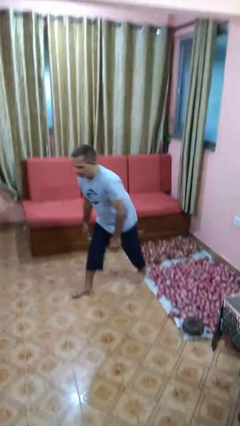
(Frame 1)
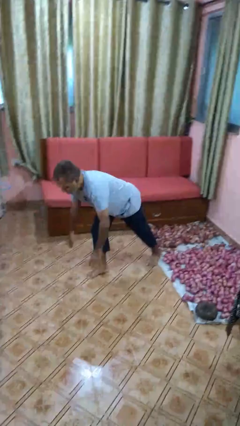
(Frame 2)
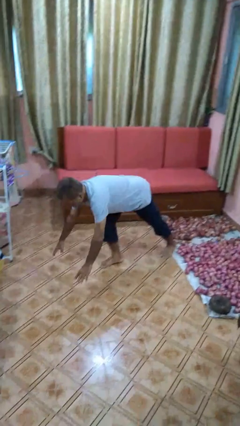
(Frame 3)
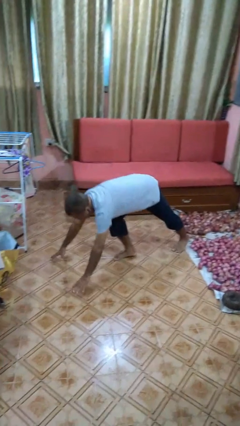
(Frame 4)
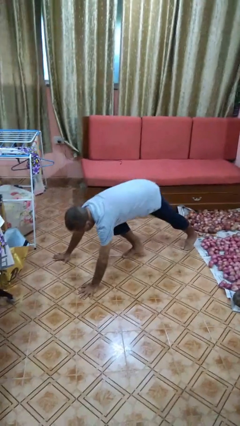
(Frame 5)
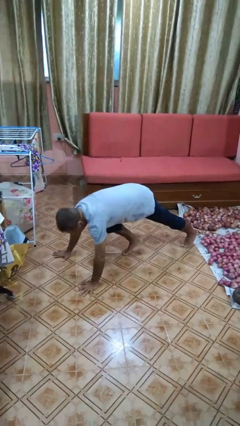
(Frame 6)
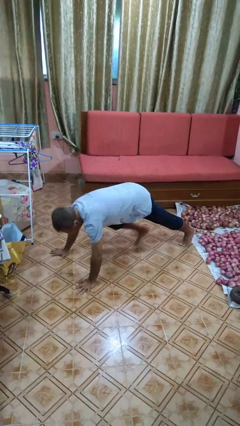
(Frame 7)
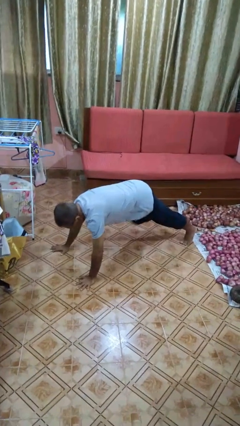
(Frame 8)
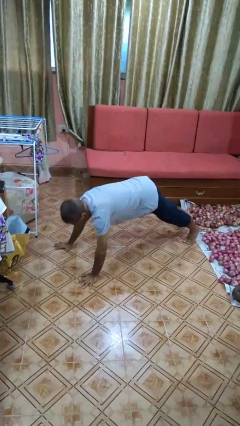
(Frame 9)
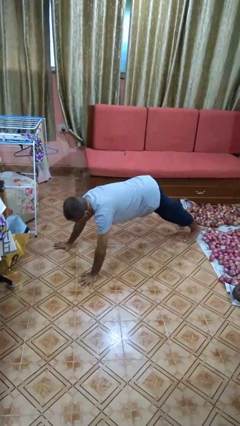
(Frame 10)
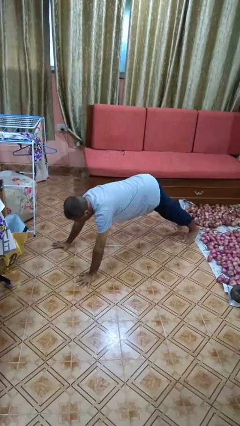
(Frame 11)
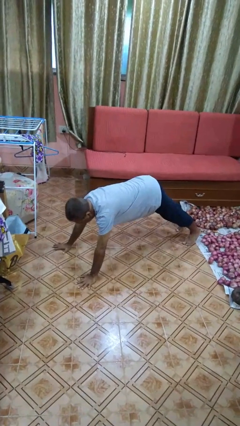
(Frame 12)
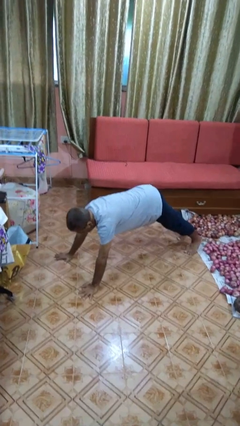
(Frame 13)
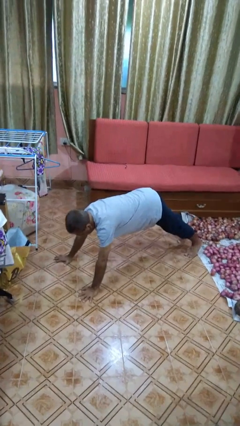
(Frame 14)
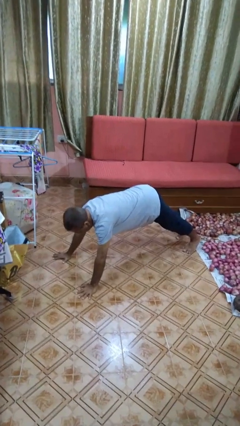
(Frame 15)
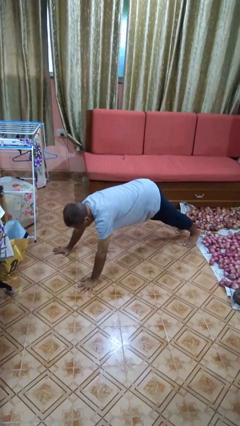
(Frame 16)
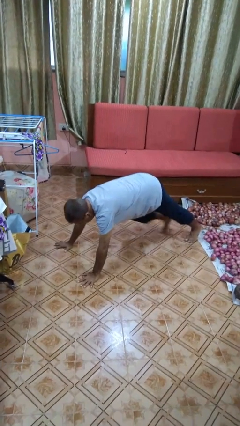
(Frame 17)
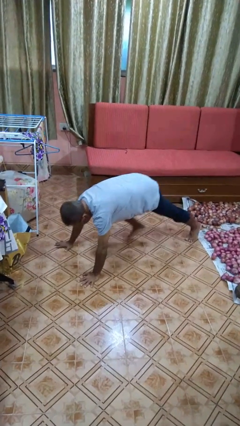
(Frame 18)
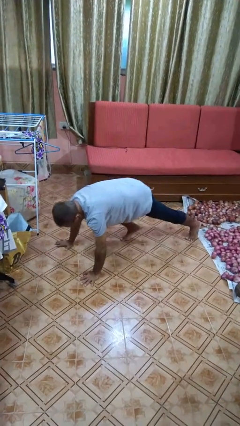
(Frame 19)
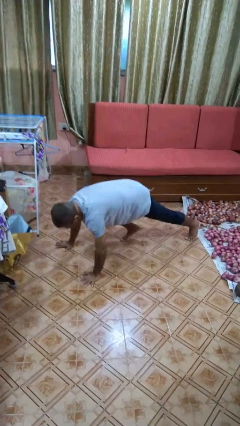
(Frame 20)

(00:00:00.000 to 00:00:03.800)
person exercises with plank

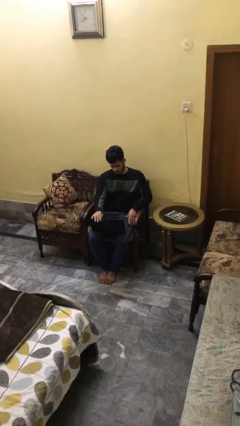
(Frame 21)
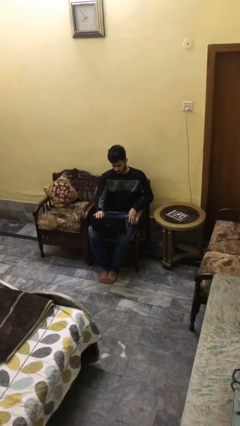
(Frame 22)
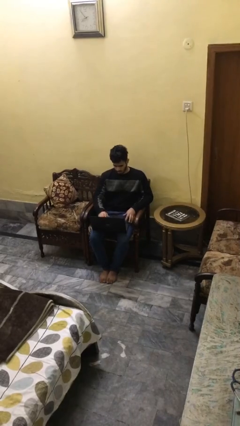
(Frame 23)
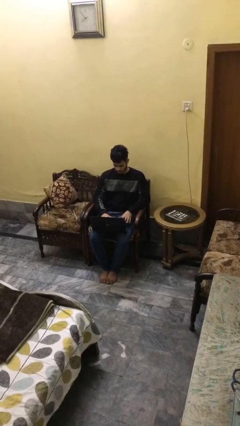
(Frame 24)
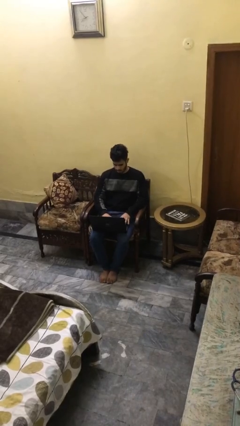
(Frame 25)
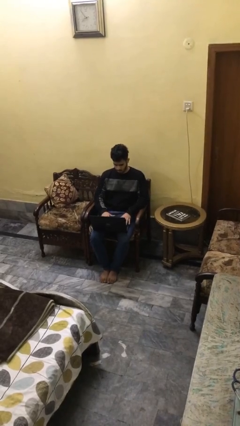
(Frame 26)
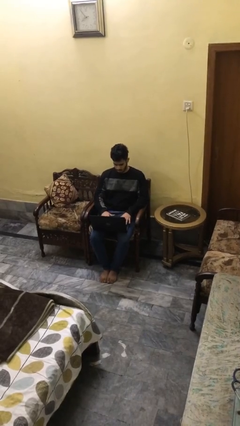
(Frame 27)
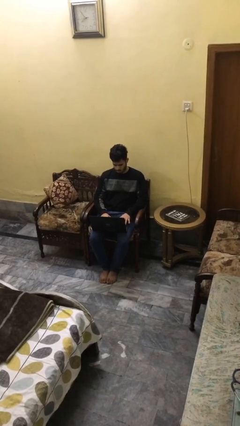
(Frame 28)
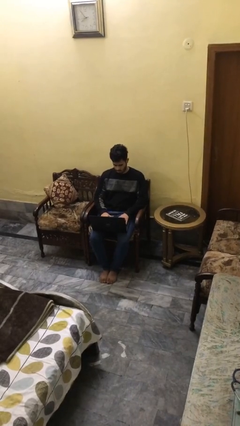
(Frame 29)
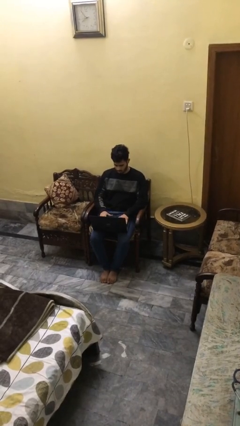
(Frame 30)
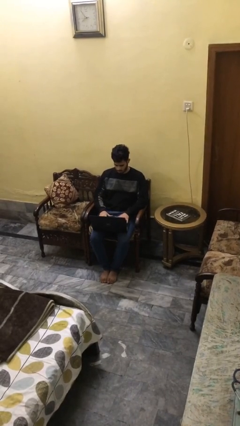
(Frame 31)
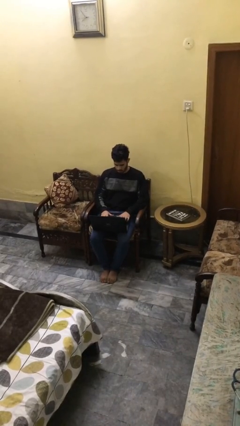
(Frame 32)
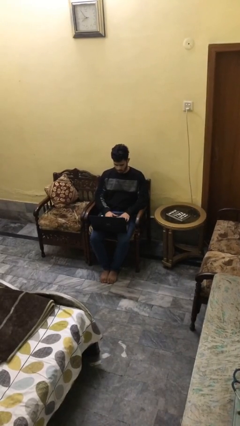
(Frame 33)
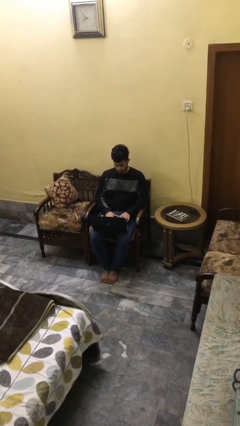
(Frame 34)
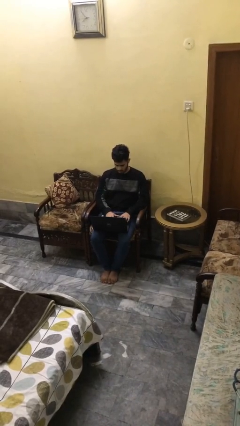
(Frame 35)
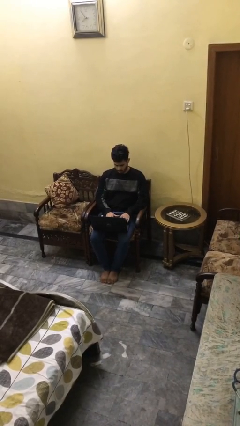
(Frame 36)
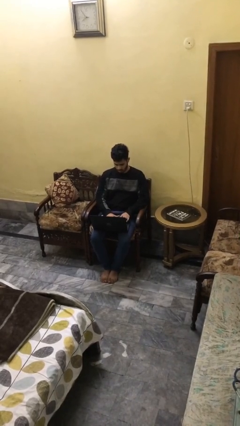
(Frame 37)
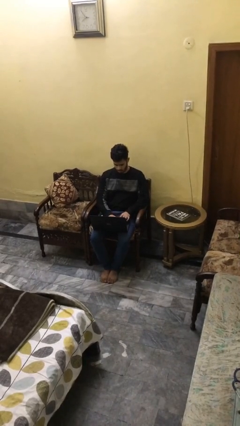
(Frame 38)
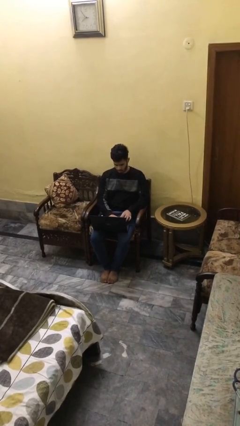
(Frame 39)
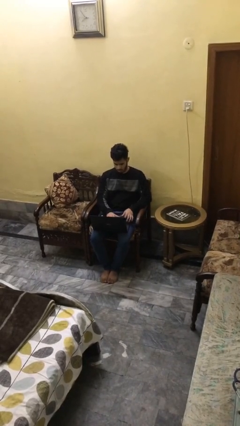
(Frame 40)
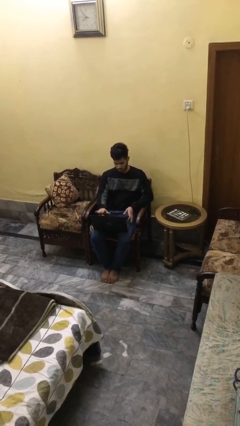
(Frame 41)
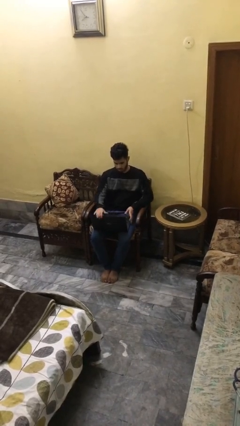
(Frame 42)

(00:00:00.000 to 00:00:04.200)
person interacts with laptop

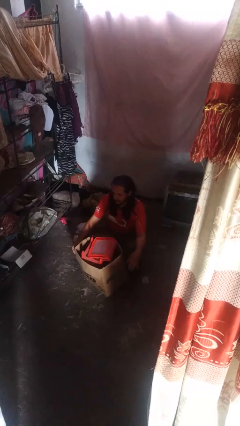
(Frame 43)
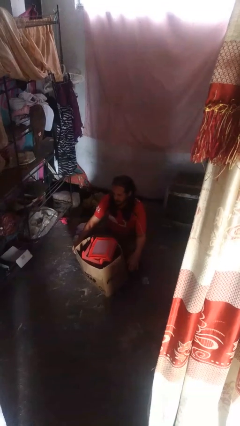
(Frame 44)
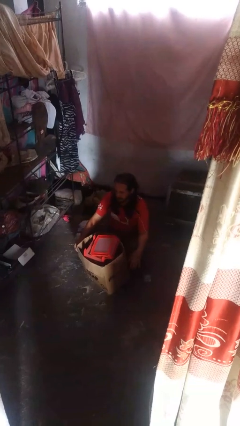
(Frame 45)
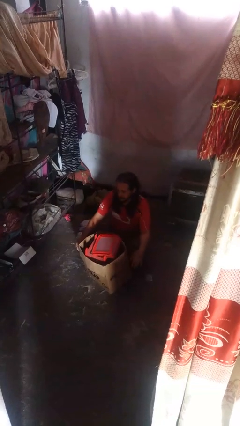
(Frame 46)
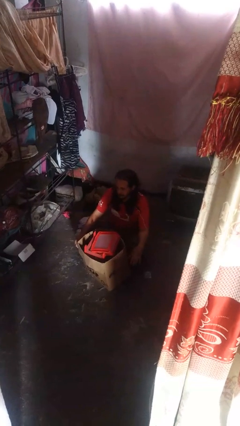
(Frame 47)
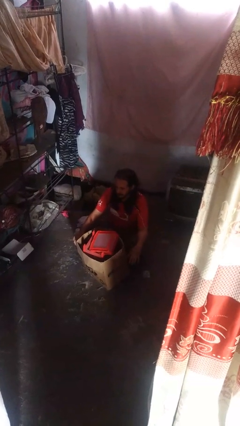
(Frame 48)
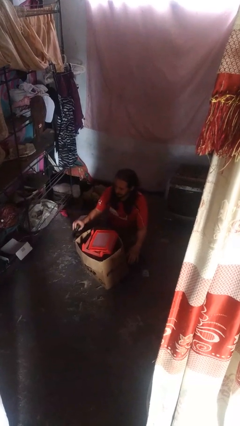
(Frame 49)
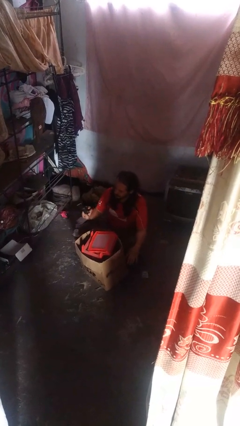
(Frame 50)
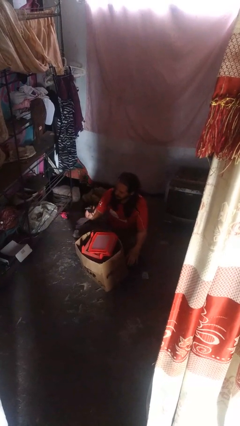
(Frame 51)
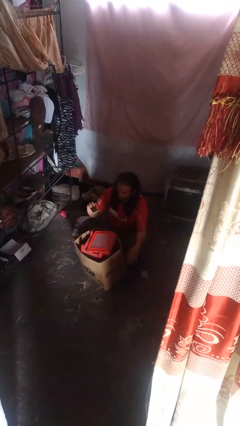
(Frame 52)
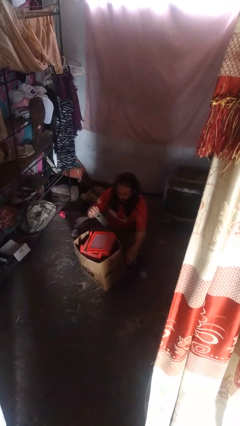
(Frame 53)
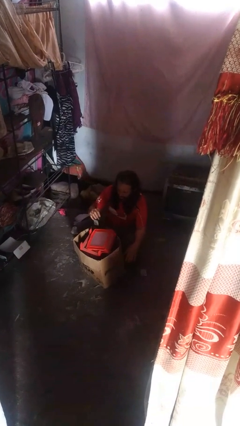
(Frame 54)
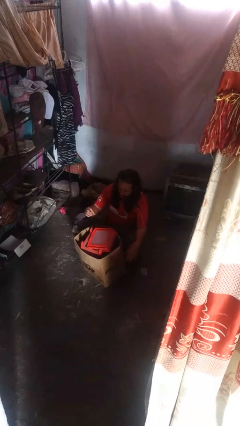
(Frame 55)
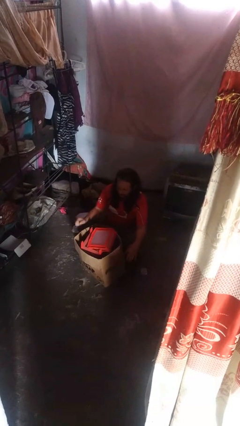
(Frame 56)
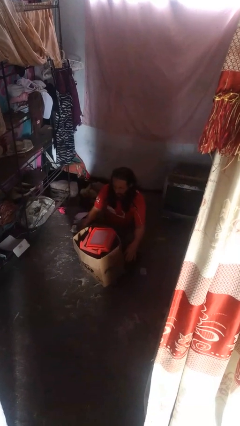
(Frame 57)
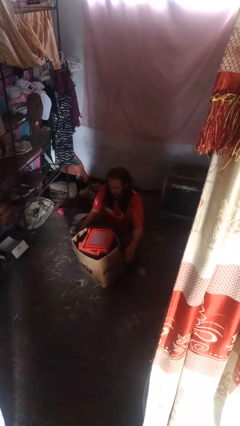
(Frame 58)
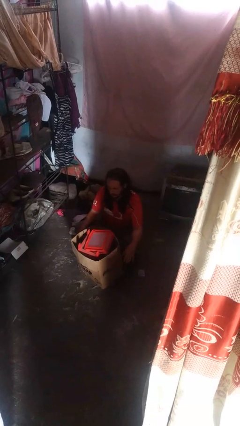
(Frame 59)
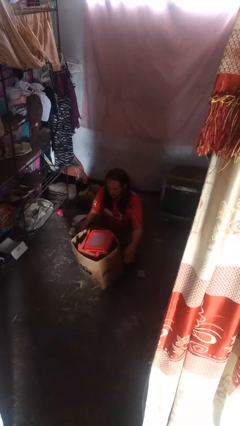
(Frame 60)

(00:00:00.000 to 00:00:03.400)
person puts object into box

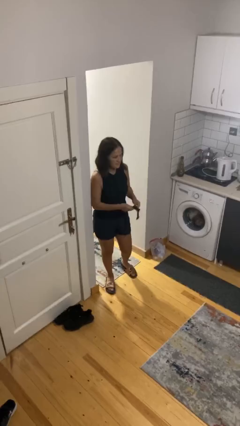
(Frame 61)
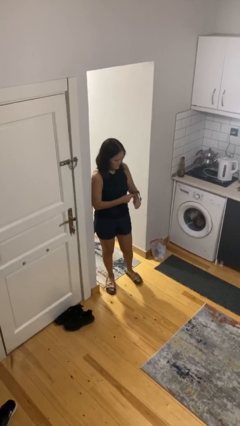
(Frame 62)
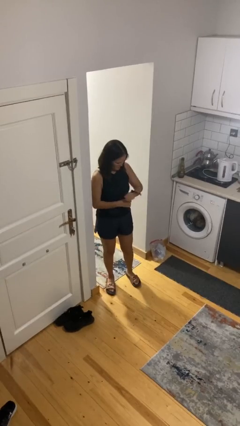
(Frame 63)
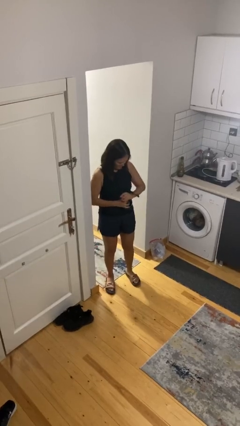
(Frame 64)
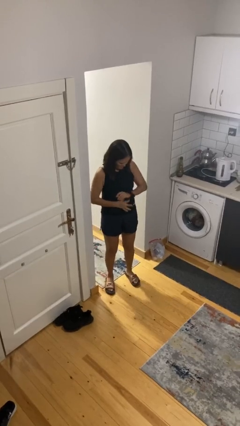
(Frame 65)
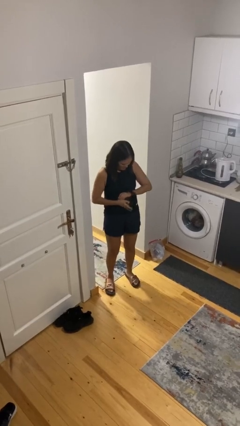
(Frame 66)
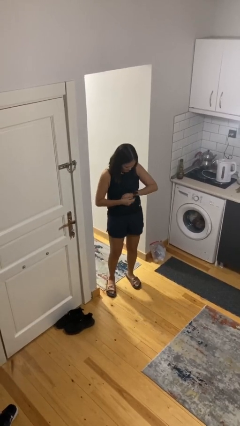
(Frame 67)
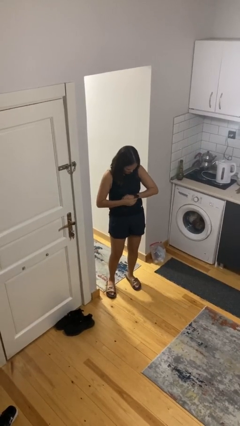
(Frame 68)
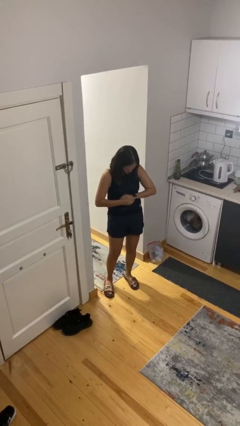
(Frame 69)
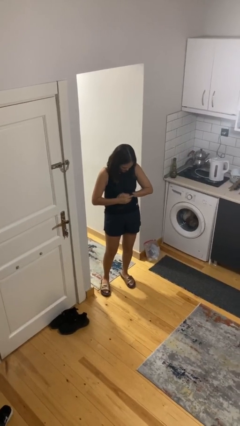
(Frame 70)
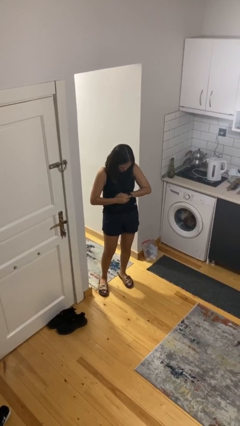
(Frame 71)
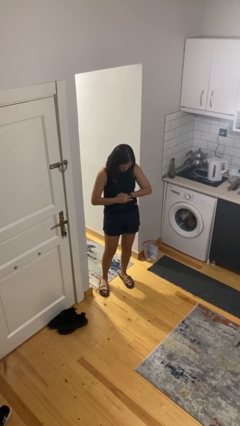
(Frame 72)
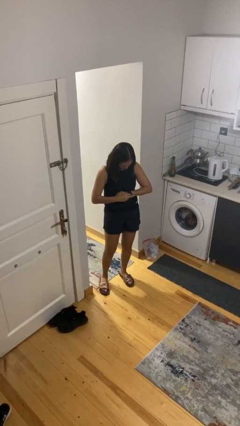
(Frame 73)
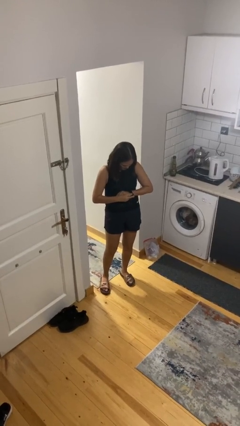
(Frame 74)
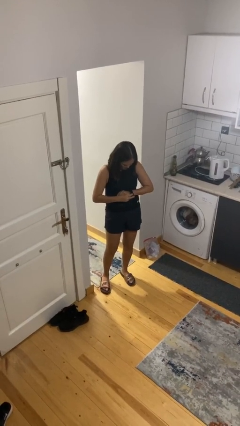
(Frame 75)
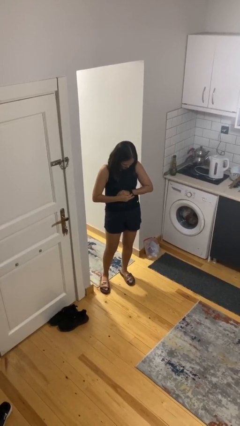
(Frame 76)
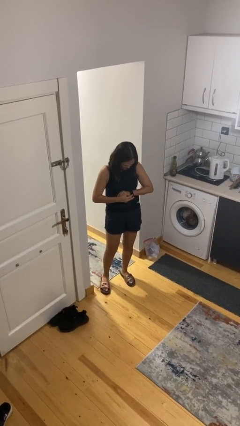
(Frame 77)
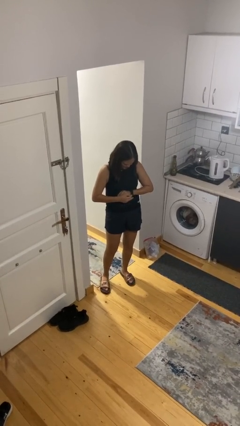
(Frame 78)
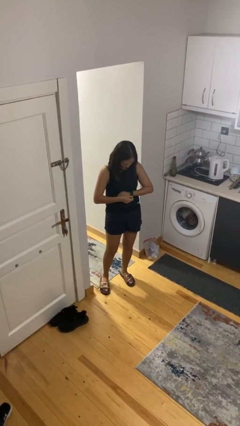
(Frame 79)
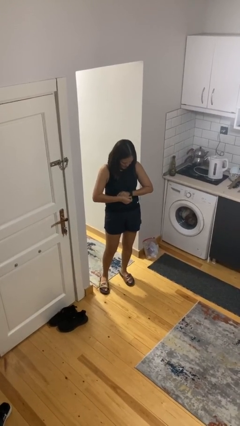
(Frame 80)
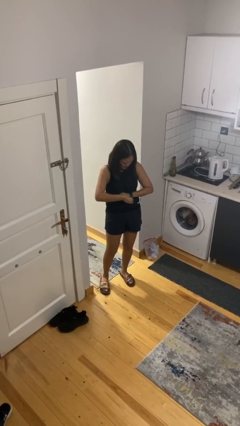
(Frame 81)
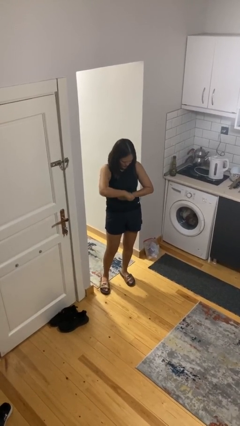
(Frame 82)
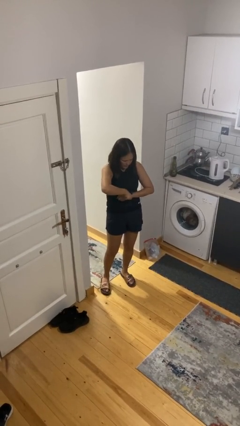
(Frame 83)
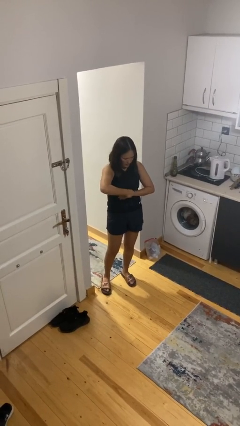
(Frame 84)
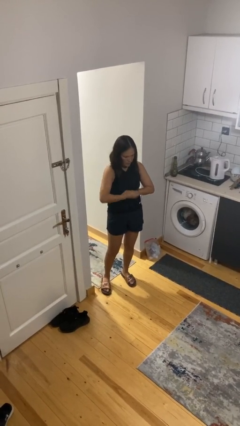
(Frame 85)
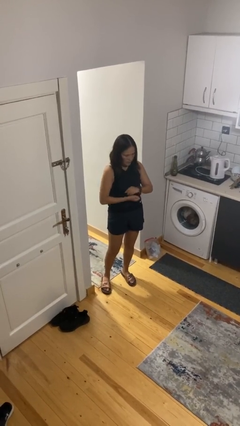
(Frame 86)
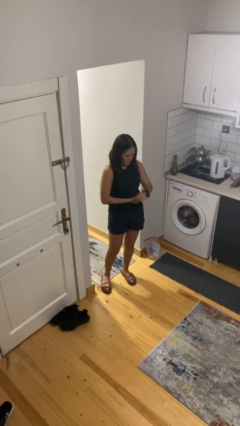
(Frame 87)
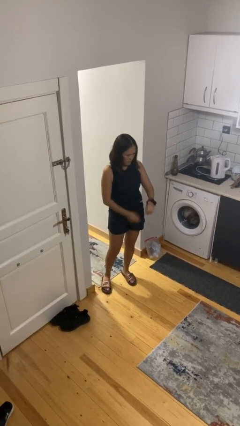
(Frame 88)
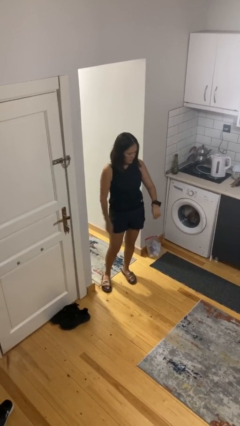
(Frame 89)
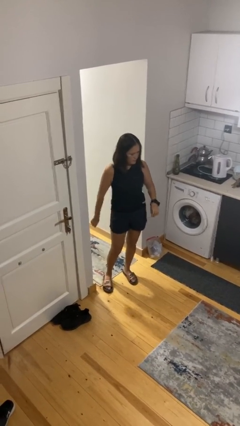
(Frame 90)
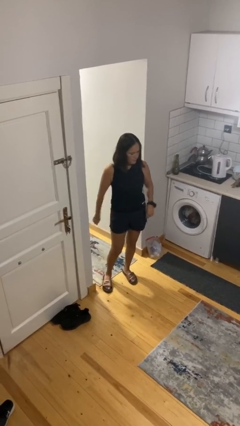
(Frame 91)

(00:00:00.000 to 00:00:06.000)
person puts on wristwatch

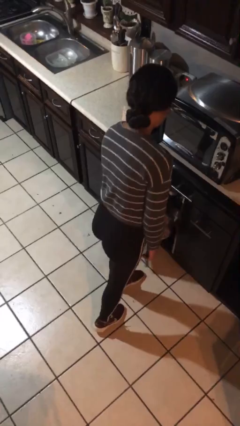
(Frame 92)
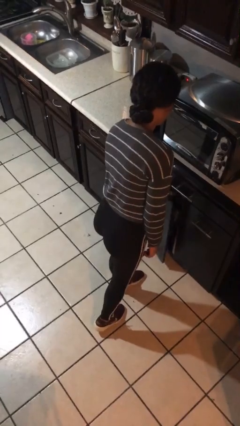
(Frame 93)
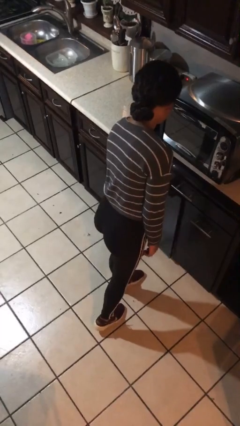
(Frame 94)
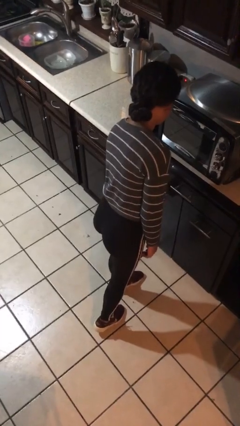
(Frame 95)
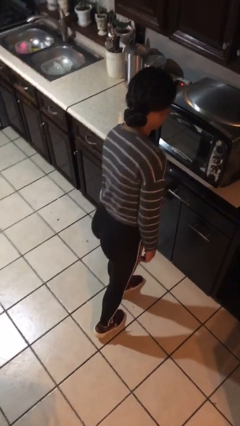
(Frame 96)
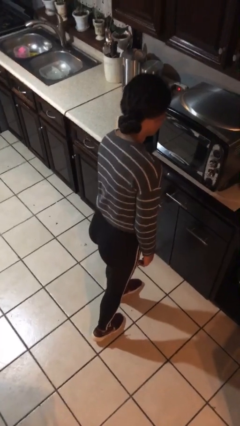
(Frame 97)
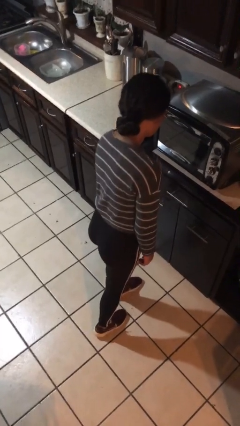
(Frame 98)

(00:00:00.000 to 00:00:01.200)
person closes cabinet
